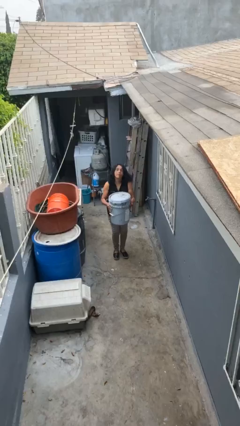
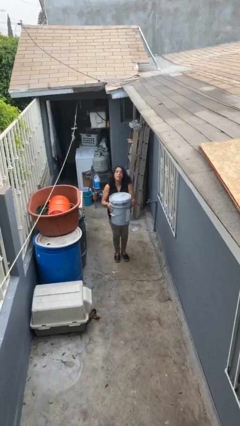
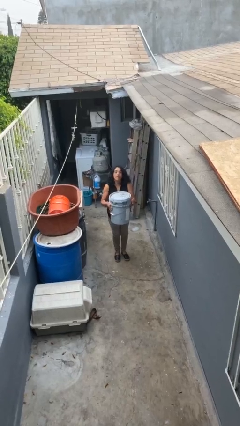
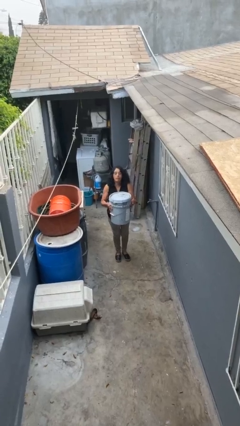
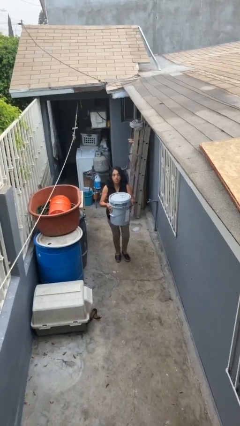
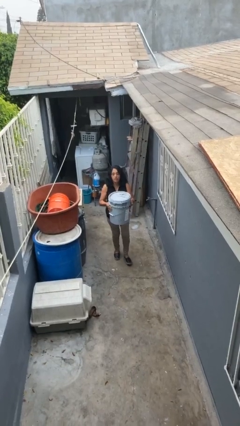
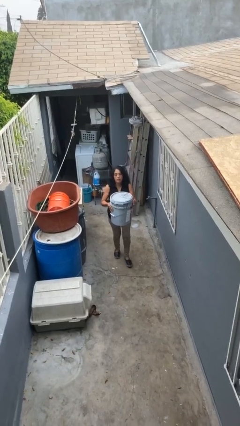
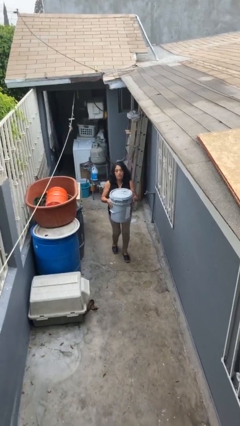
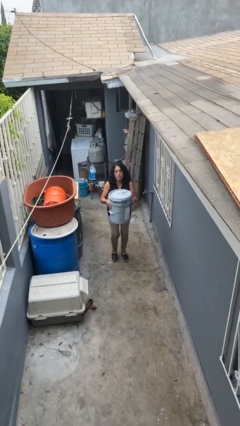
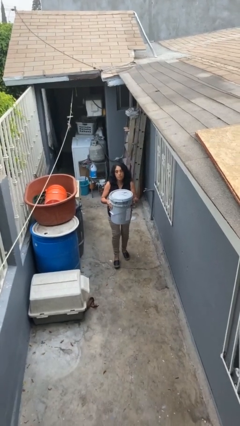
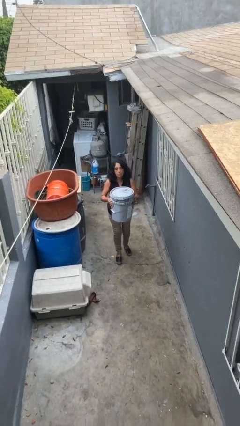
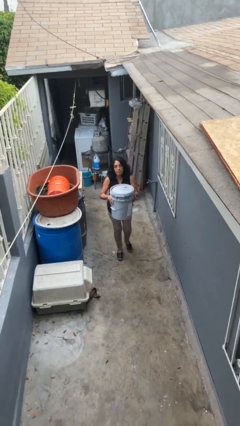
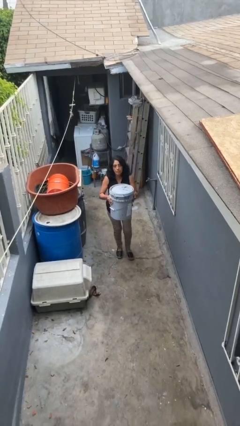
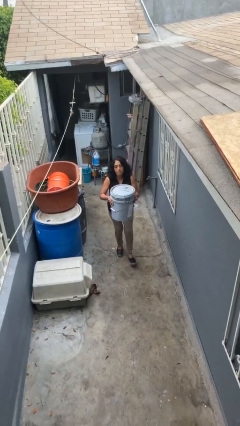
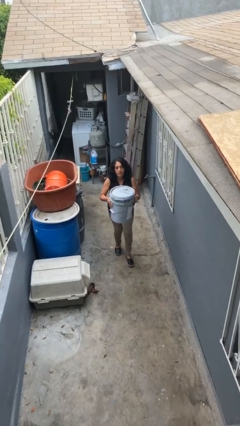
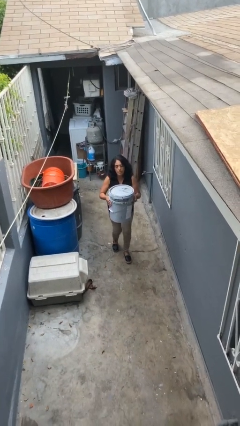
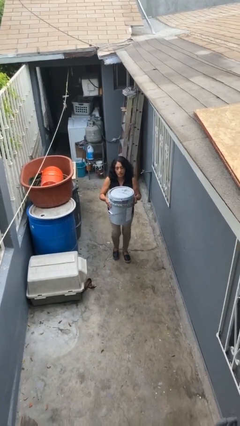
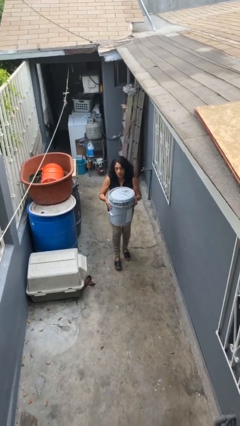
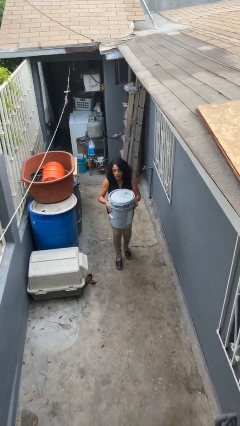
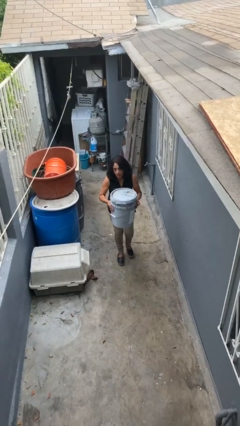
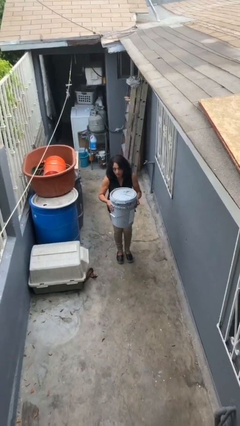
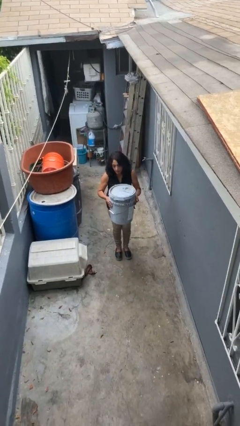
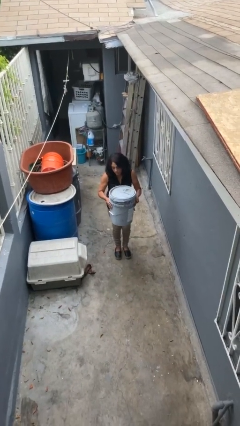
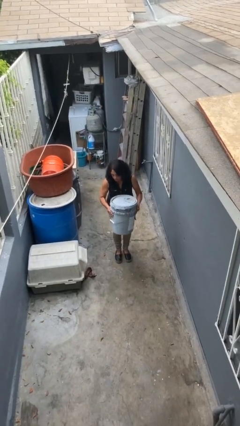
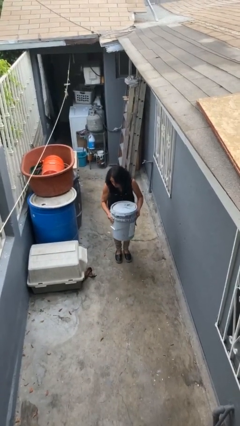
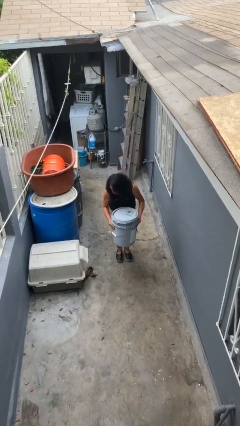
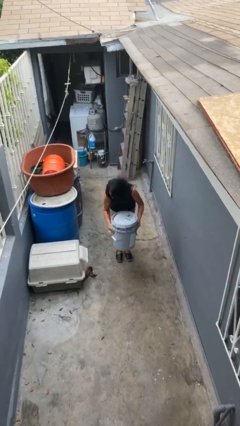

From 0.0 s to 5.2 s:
person carries heavy object

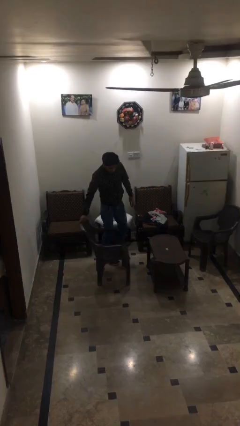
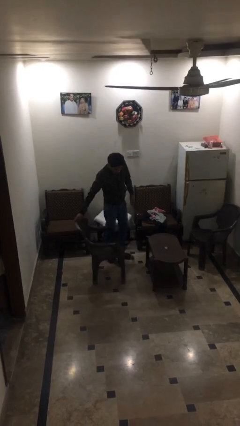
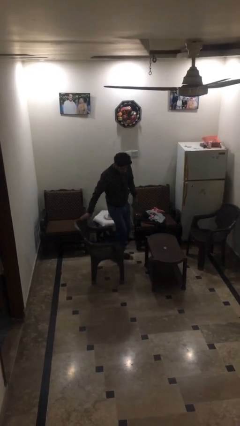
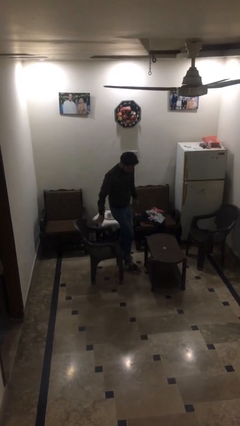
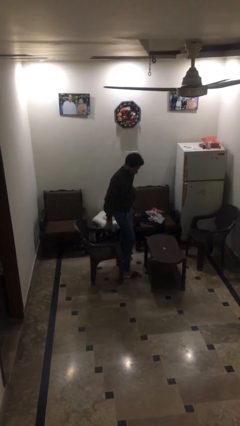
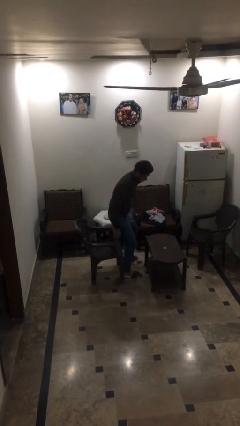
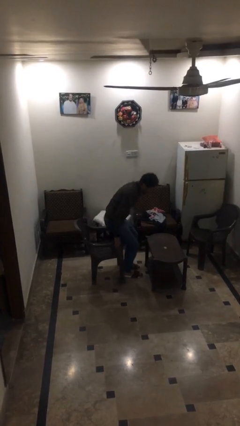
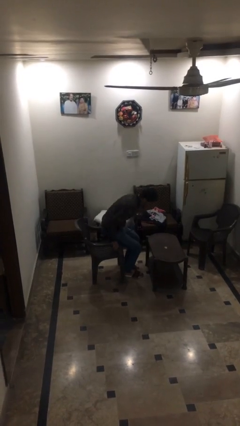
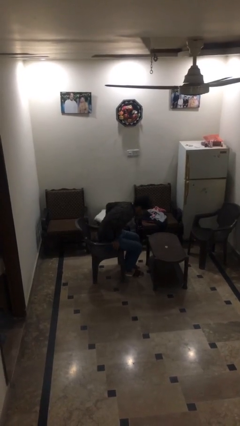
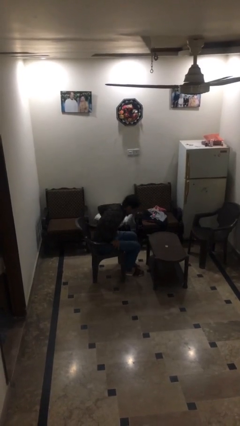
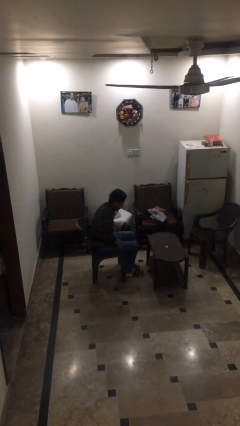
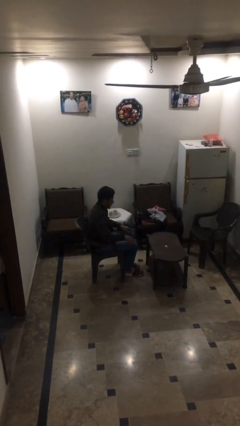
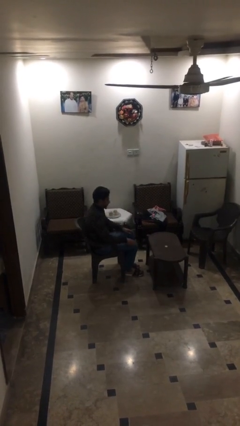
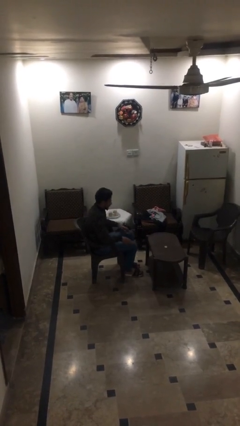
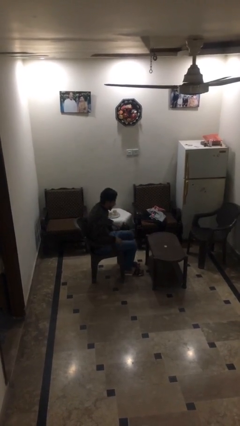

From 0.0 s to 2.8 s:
person sits down

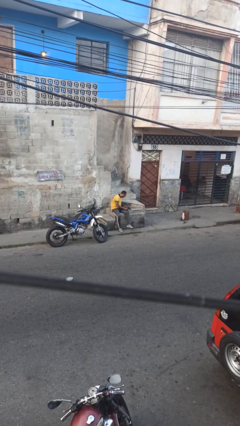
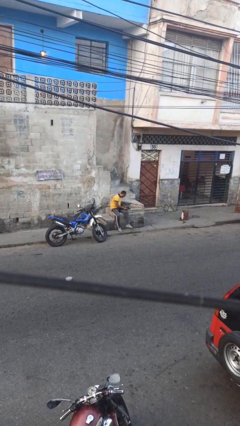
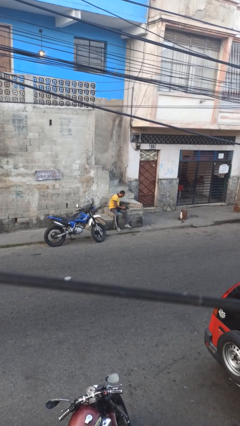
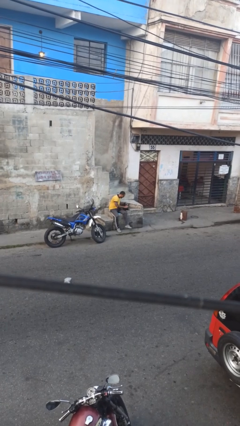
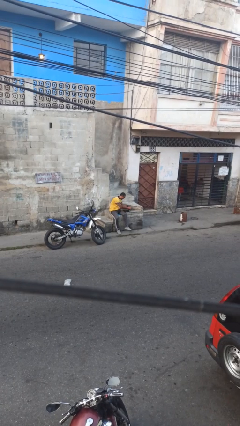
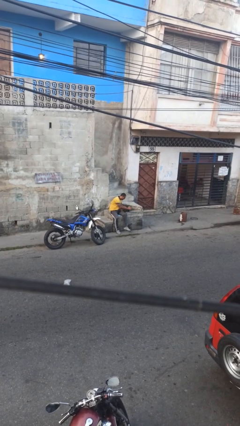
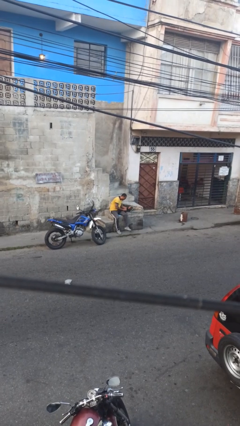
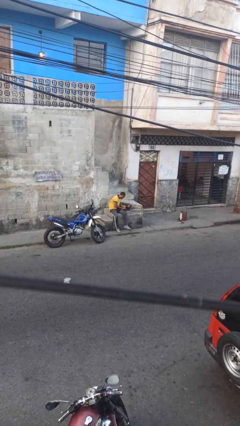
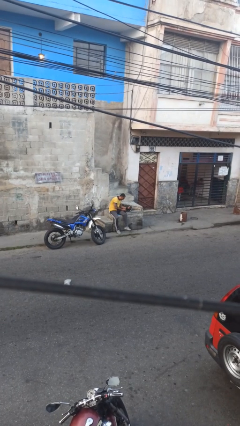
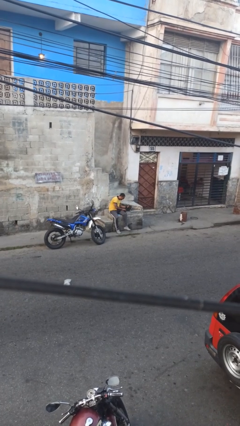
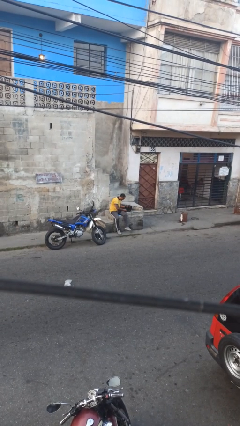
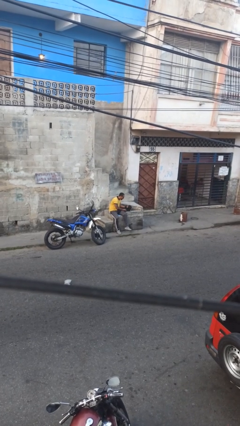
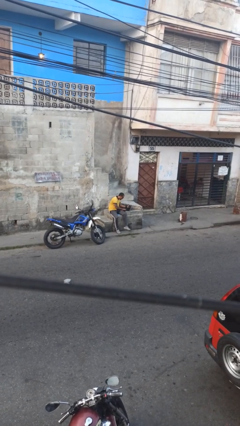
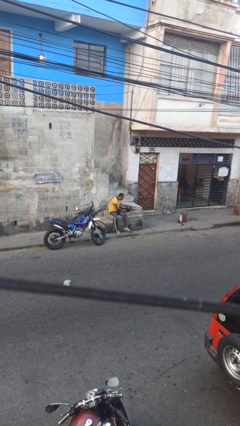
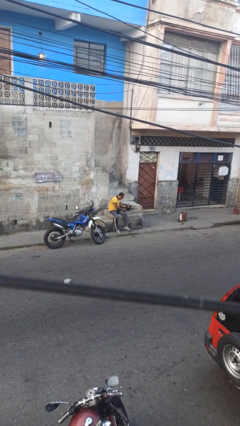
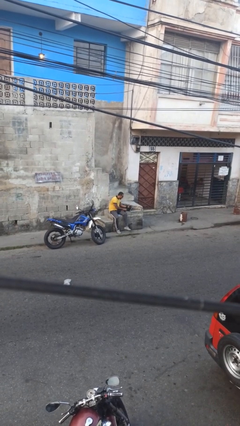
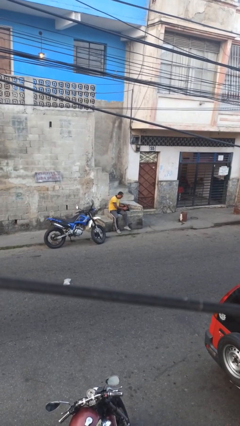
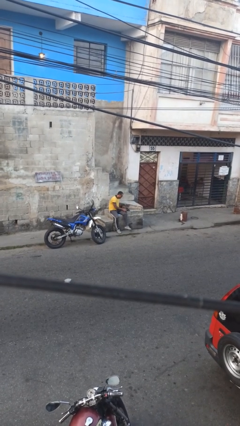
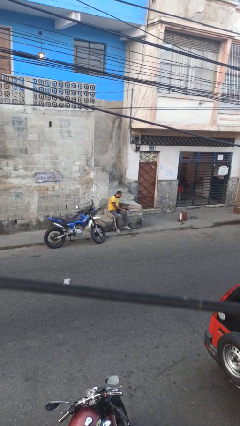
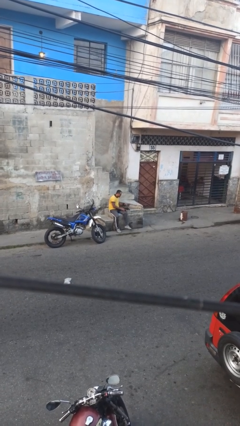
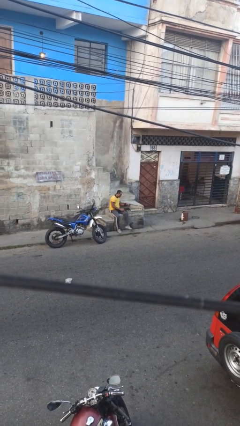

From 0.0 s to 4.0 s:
person interacts with laptop

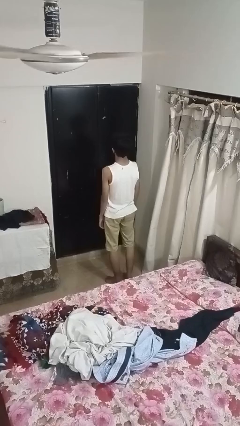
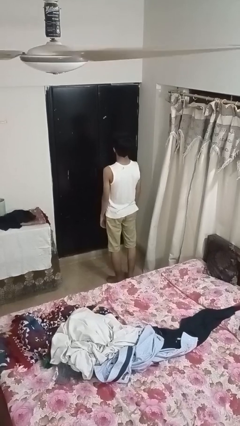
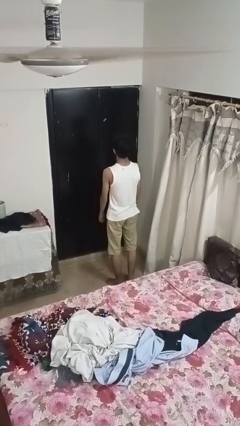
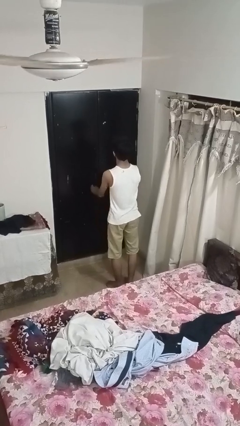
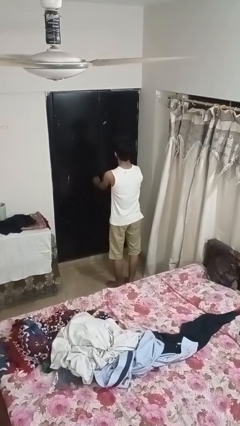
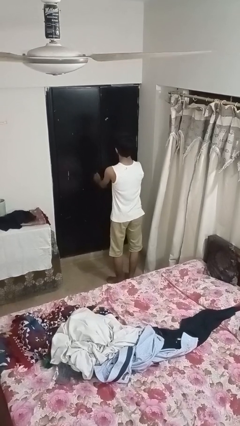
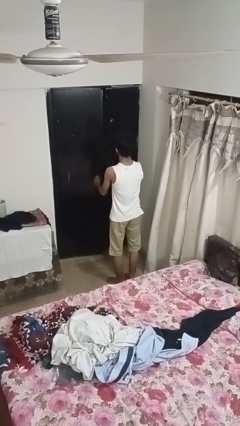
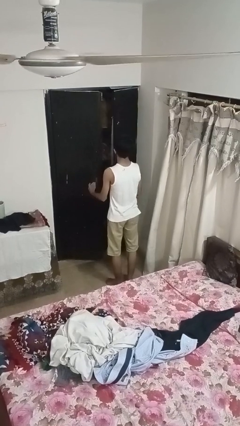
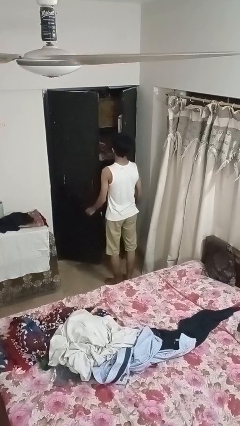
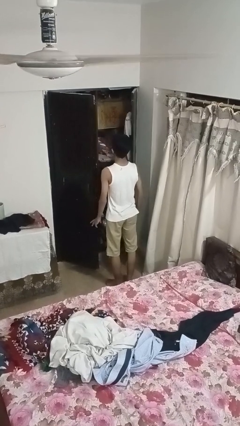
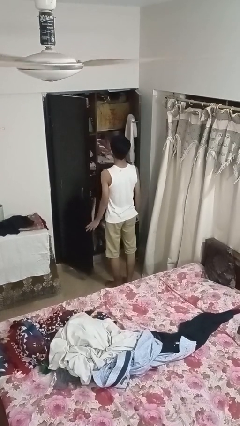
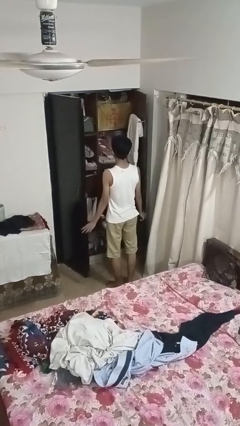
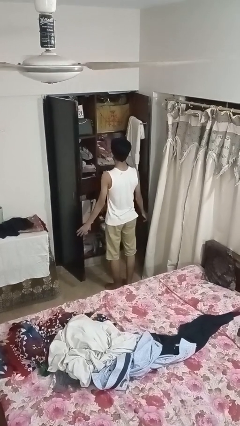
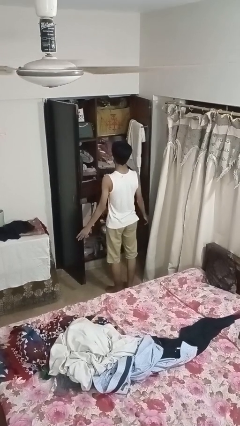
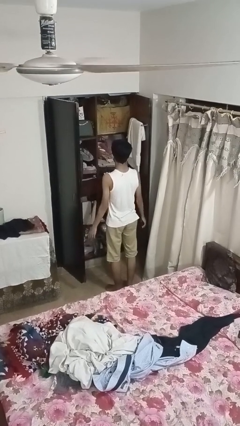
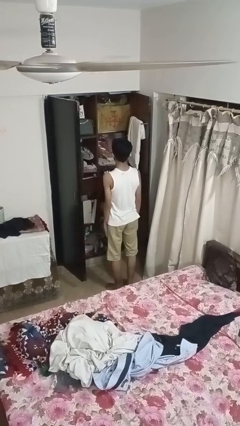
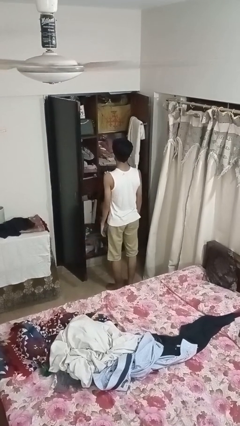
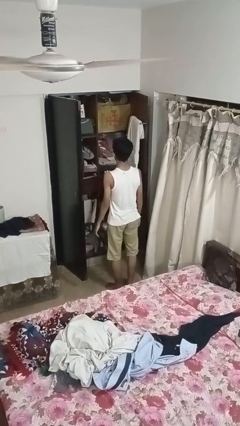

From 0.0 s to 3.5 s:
person opens closet door

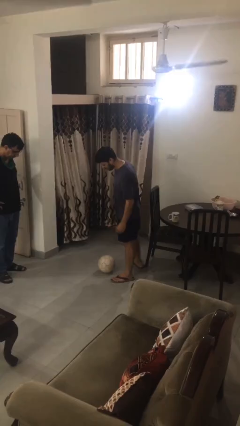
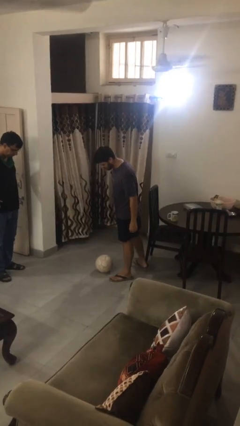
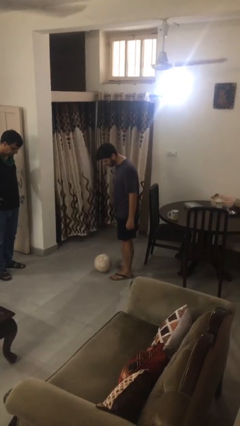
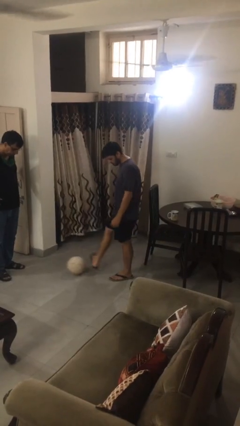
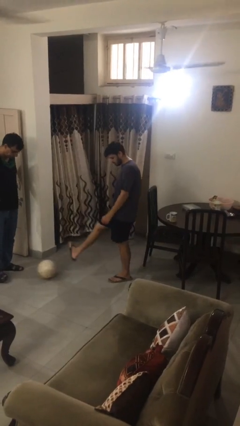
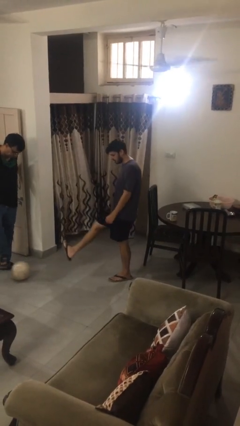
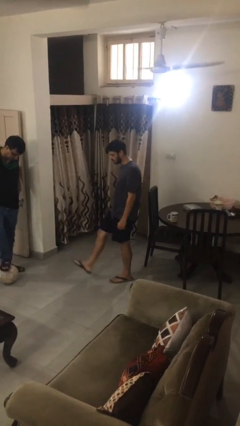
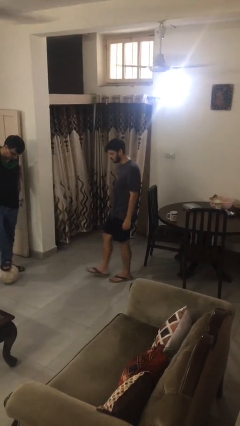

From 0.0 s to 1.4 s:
person kicks object to person

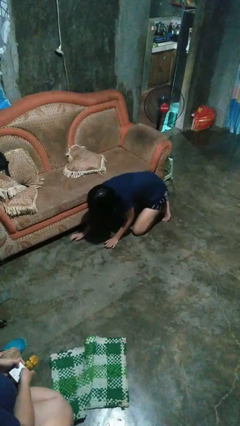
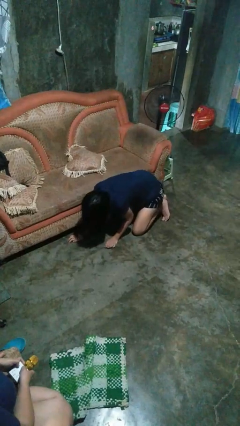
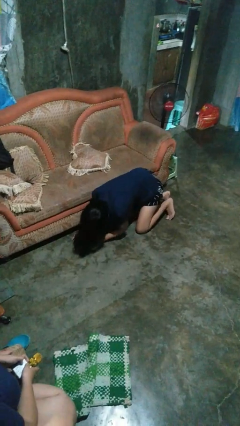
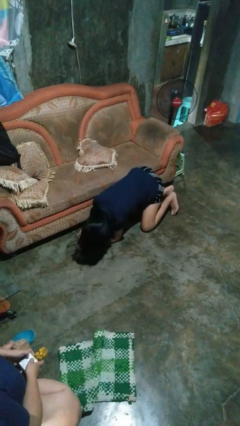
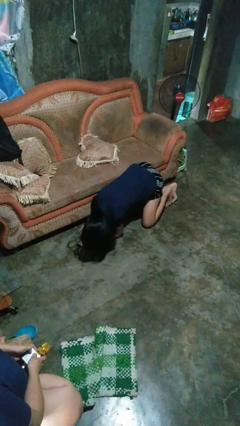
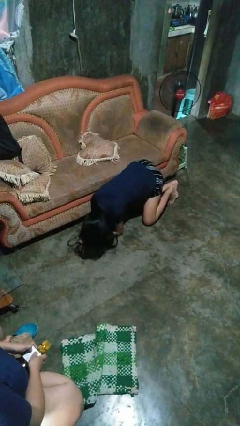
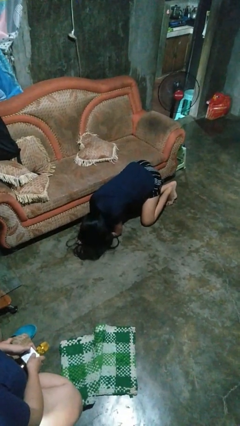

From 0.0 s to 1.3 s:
person searches in couch
